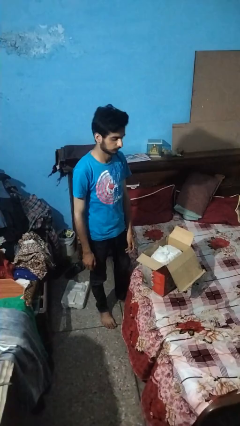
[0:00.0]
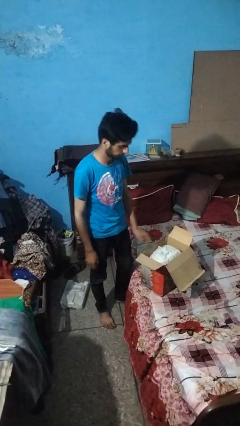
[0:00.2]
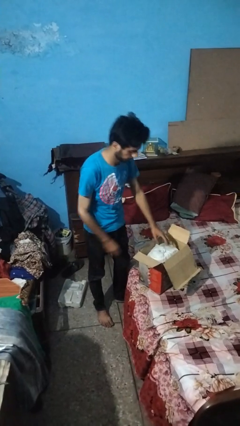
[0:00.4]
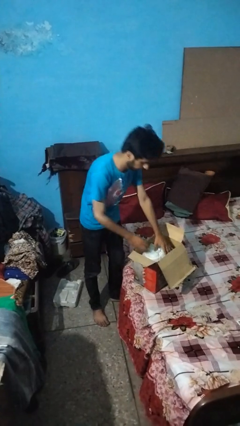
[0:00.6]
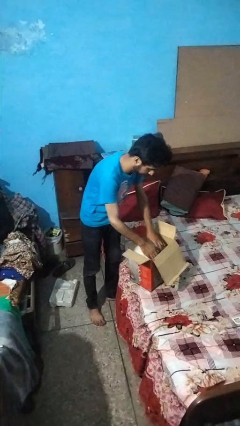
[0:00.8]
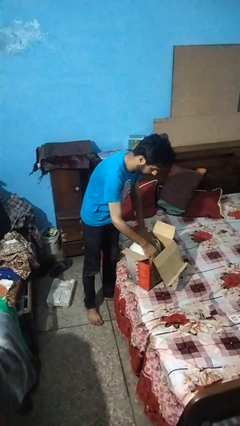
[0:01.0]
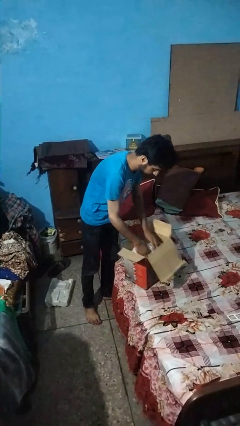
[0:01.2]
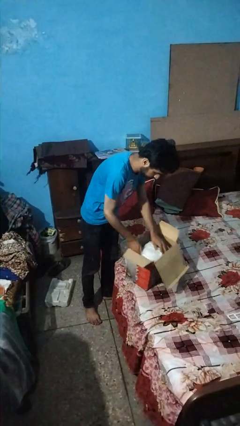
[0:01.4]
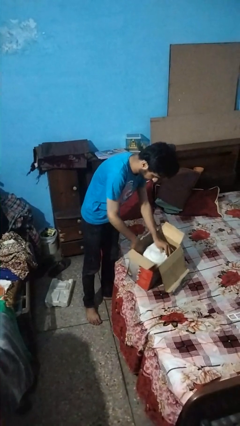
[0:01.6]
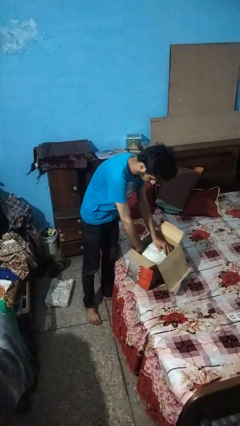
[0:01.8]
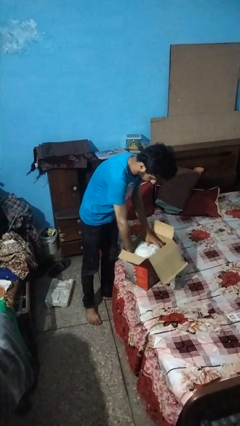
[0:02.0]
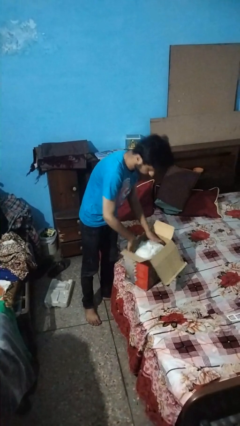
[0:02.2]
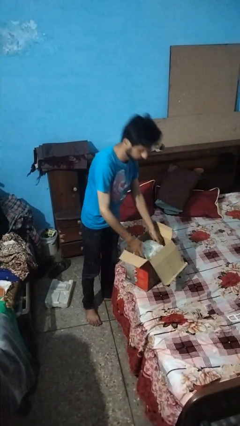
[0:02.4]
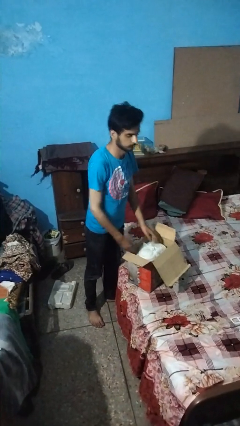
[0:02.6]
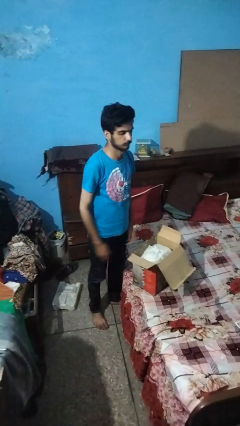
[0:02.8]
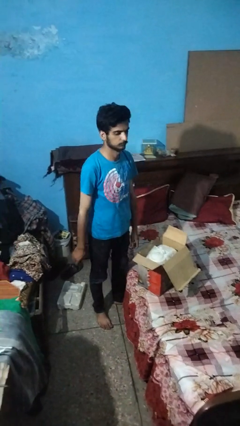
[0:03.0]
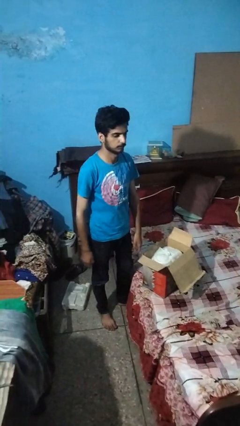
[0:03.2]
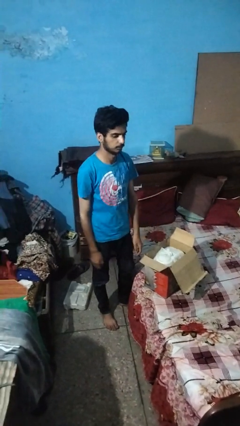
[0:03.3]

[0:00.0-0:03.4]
person searches in box

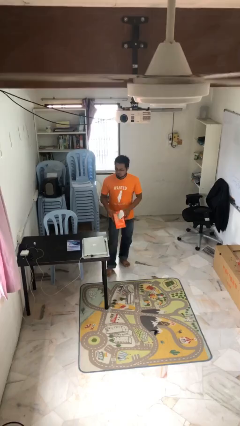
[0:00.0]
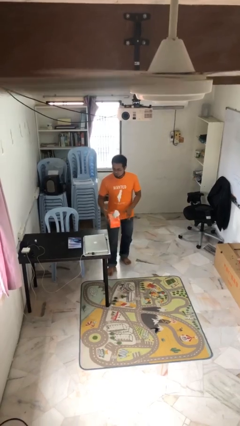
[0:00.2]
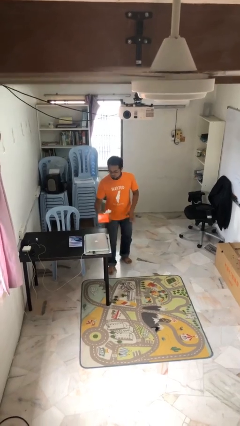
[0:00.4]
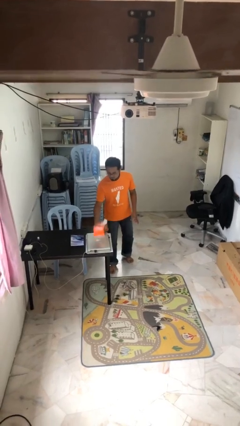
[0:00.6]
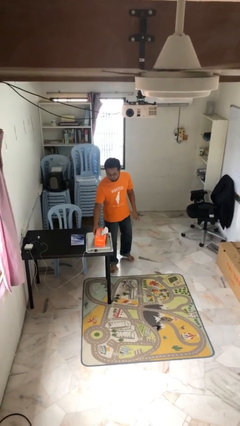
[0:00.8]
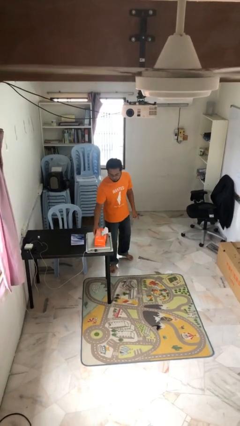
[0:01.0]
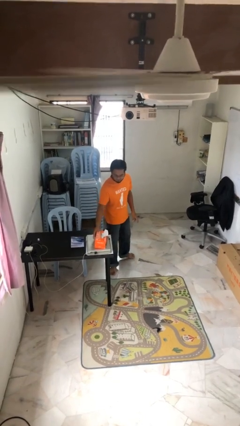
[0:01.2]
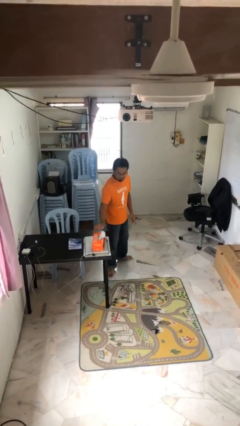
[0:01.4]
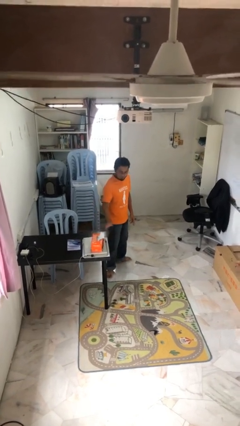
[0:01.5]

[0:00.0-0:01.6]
person puts down object on table

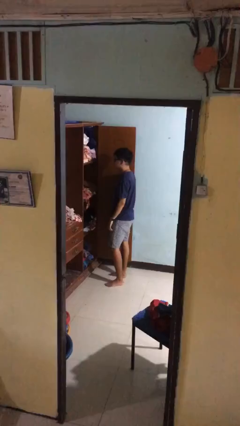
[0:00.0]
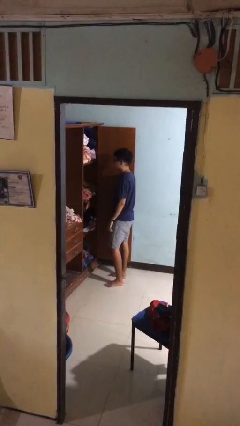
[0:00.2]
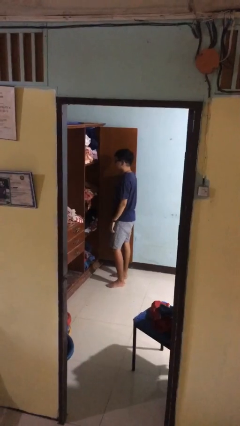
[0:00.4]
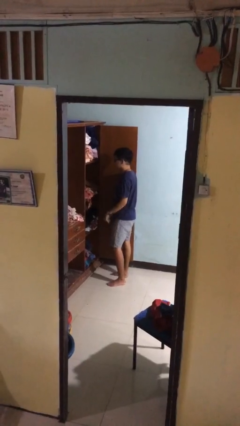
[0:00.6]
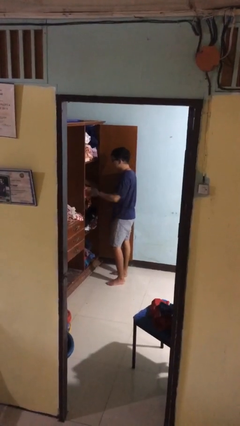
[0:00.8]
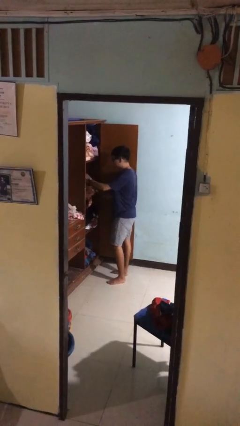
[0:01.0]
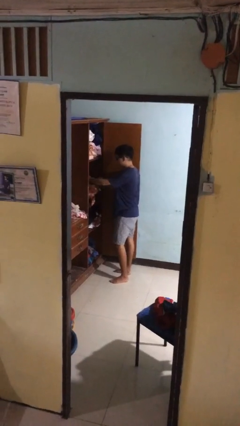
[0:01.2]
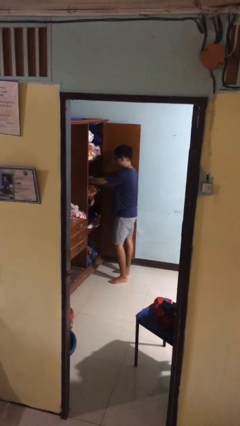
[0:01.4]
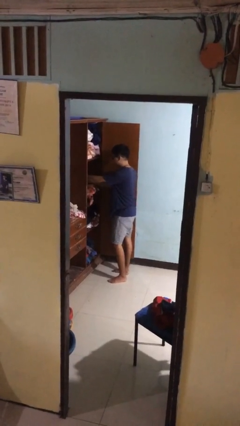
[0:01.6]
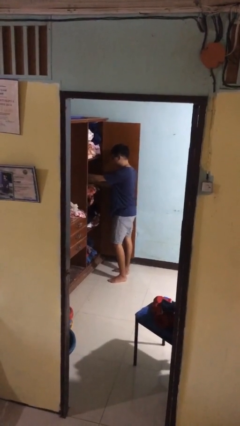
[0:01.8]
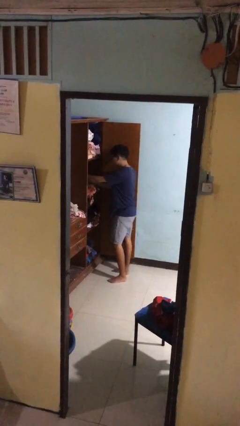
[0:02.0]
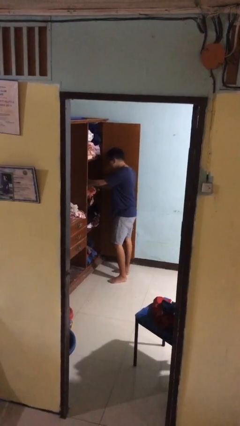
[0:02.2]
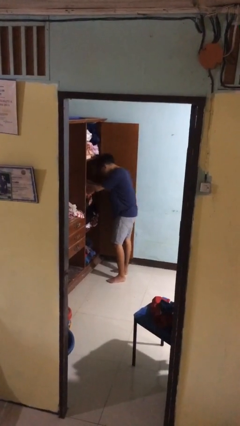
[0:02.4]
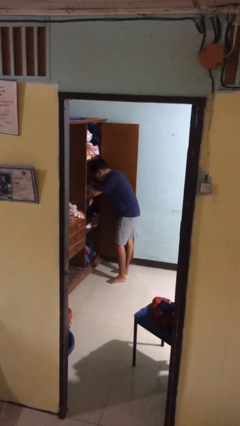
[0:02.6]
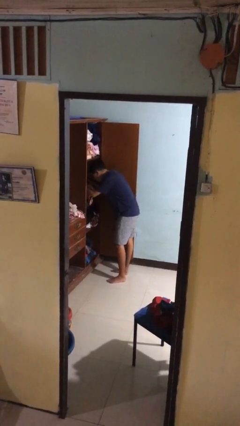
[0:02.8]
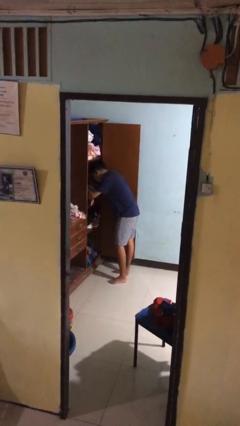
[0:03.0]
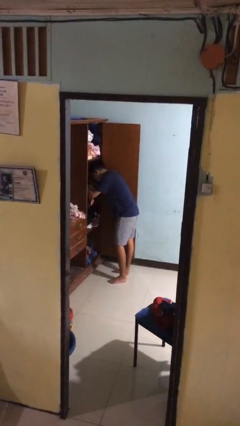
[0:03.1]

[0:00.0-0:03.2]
person searches in cabinet

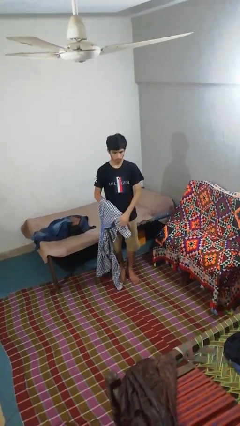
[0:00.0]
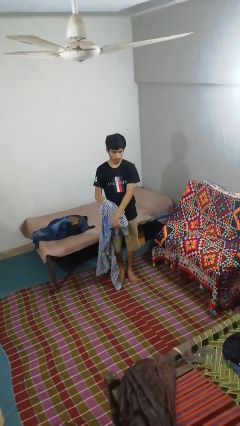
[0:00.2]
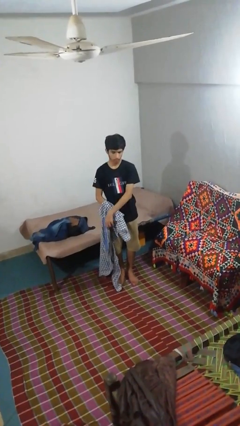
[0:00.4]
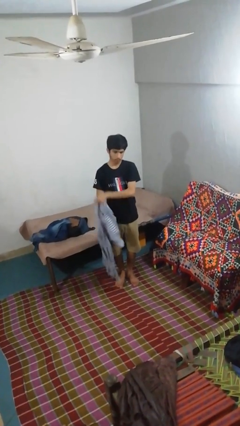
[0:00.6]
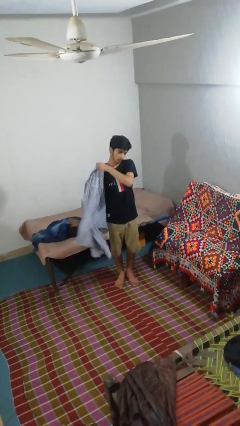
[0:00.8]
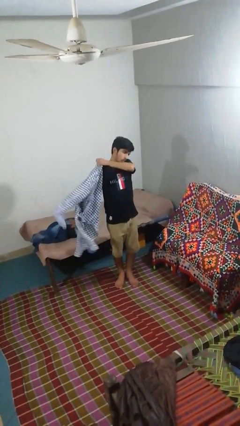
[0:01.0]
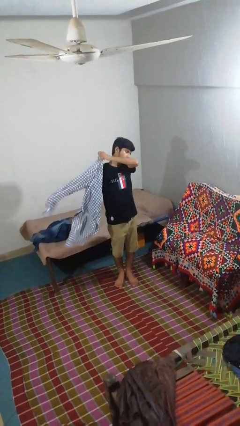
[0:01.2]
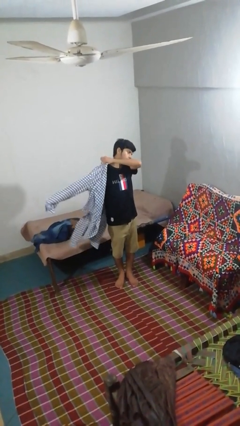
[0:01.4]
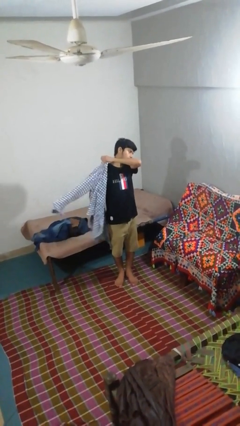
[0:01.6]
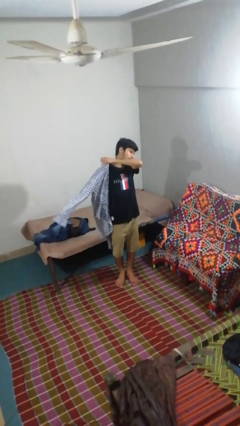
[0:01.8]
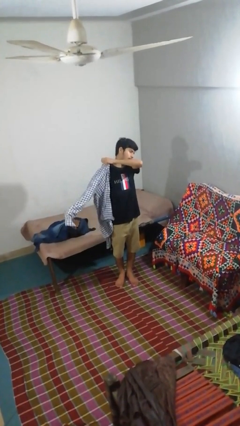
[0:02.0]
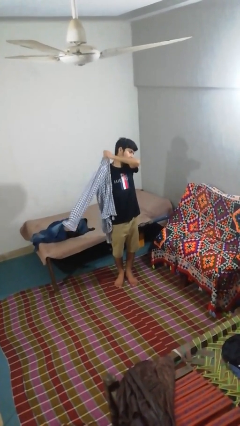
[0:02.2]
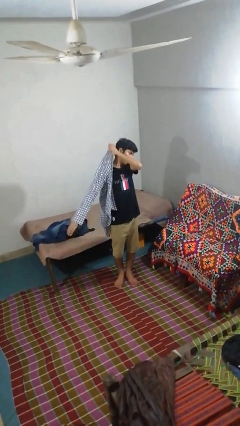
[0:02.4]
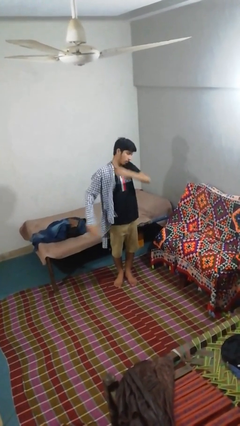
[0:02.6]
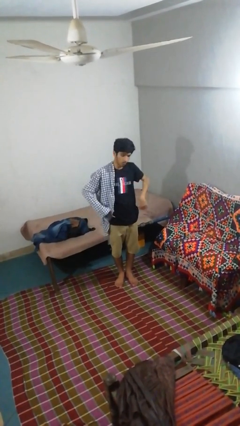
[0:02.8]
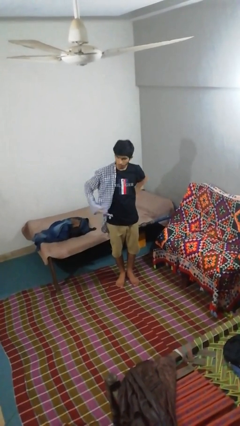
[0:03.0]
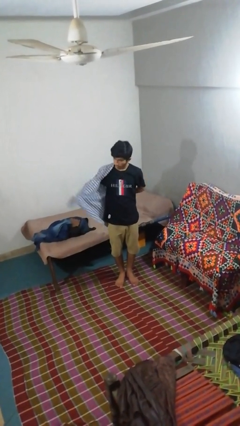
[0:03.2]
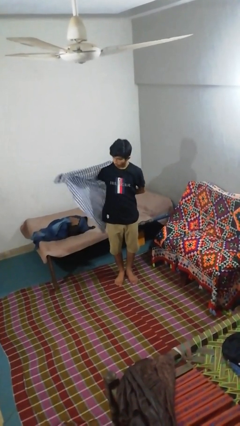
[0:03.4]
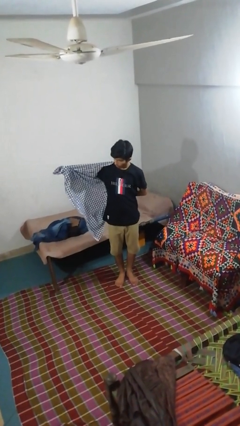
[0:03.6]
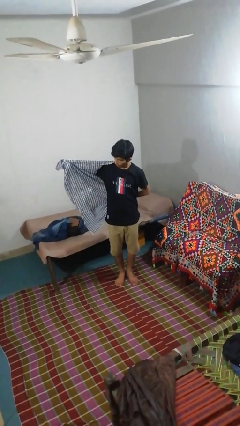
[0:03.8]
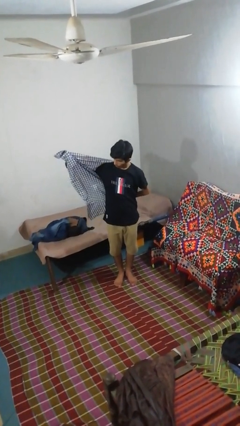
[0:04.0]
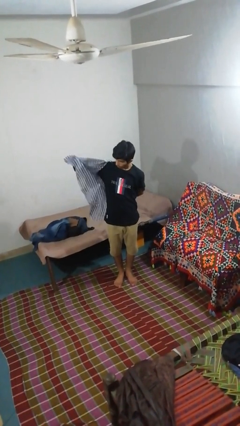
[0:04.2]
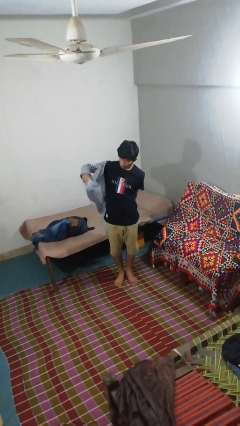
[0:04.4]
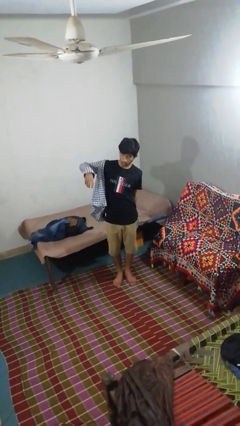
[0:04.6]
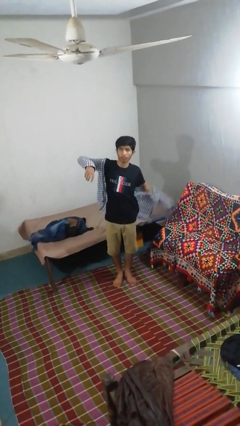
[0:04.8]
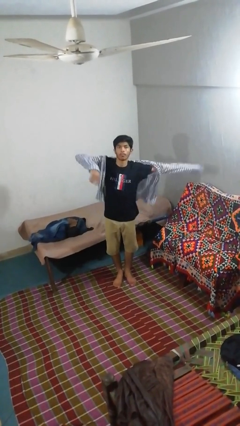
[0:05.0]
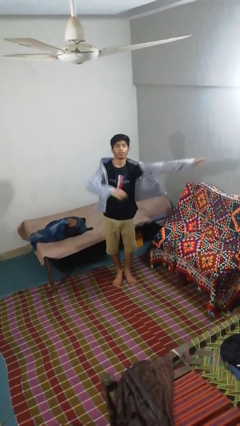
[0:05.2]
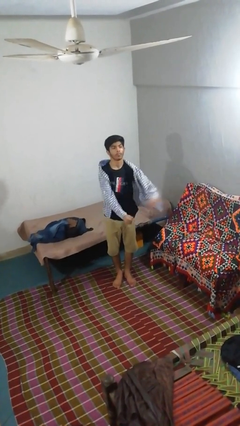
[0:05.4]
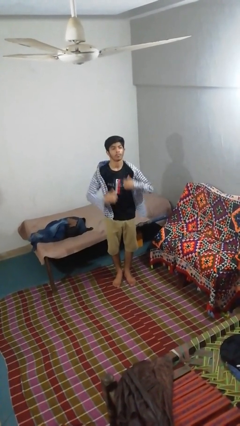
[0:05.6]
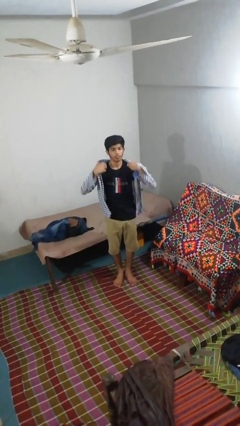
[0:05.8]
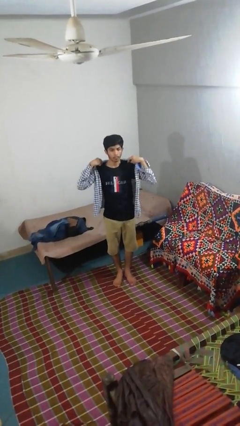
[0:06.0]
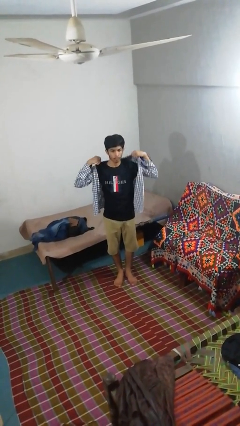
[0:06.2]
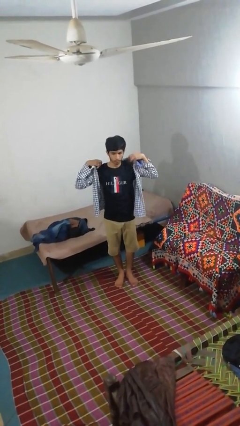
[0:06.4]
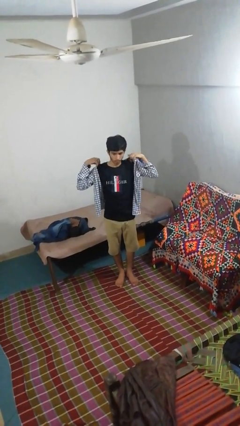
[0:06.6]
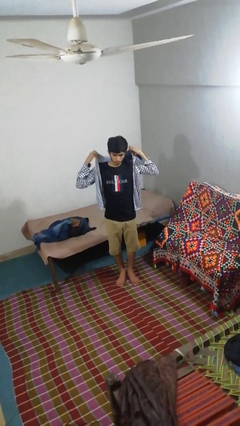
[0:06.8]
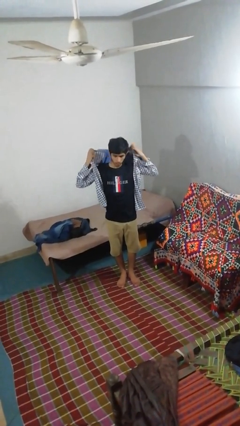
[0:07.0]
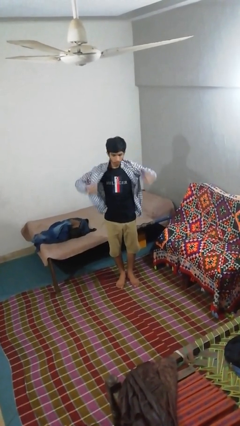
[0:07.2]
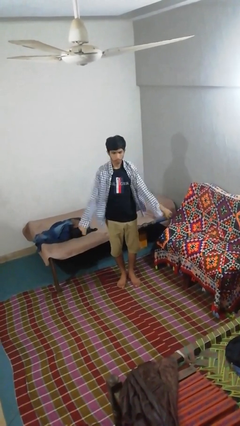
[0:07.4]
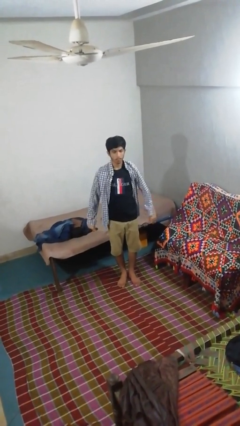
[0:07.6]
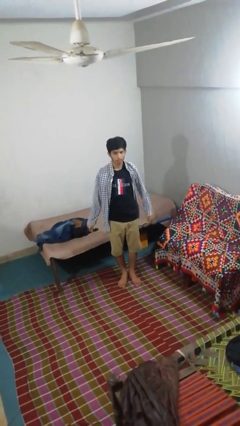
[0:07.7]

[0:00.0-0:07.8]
person puts on shirt

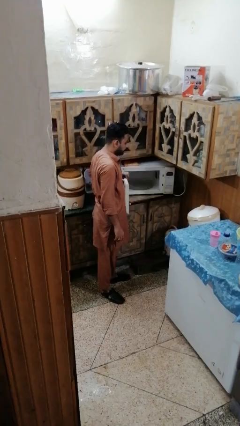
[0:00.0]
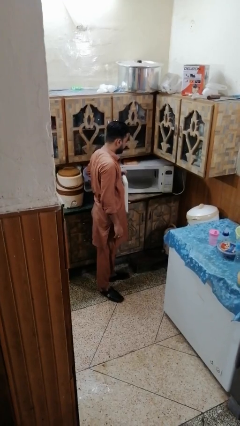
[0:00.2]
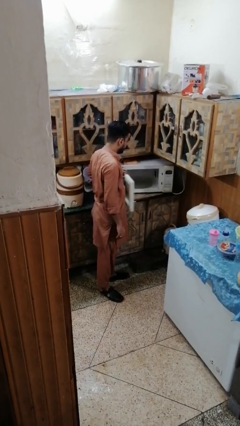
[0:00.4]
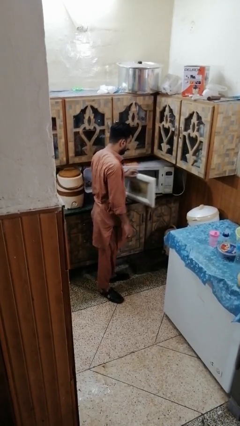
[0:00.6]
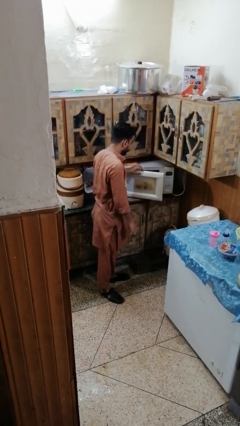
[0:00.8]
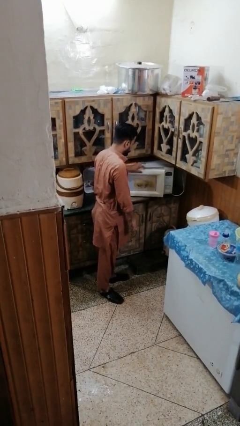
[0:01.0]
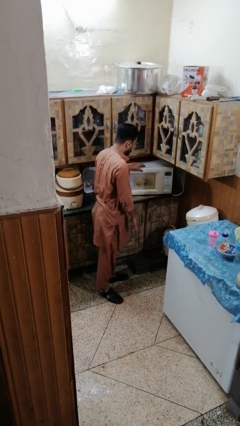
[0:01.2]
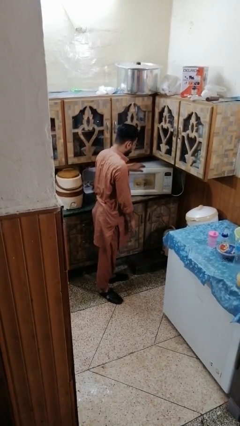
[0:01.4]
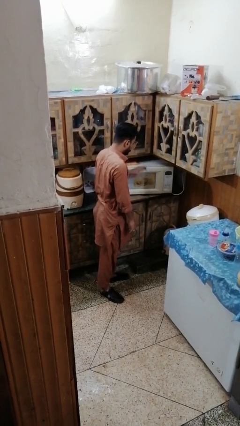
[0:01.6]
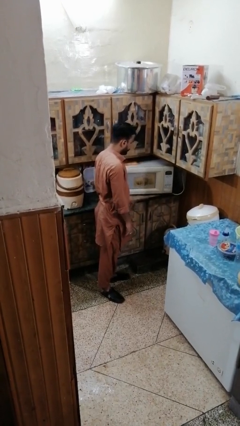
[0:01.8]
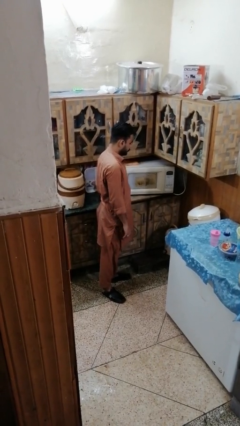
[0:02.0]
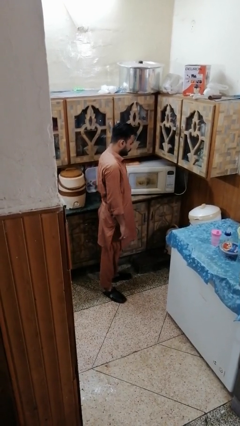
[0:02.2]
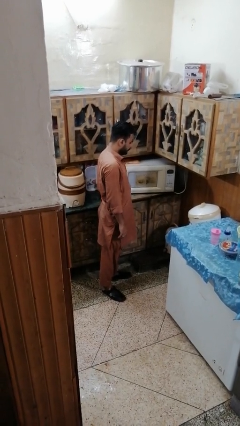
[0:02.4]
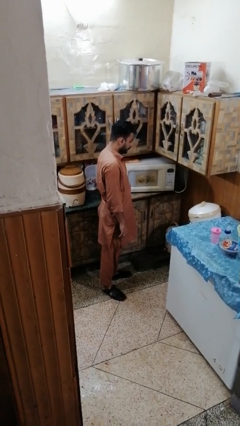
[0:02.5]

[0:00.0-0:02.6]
person closes microwave
